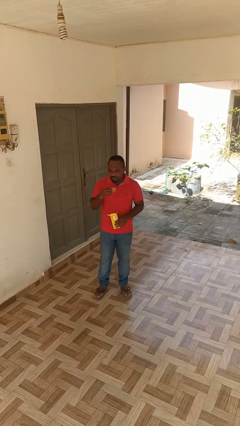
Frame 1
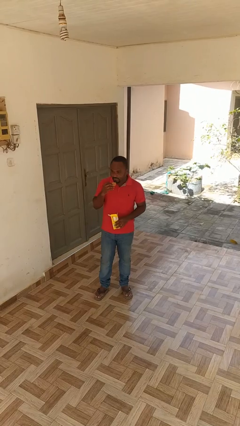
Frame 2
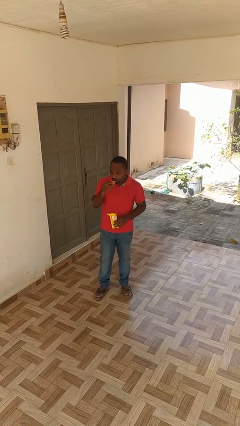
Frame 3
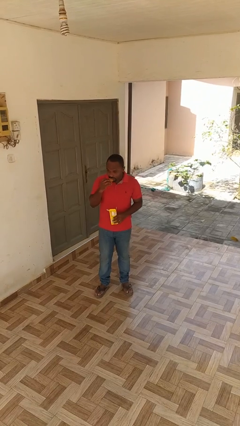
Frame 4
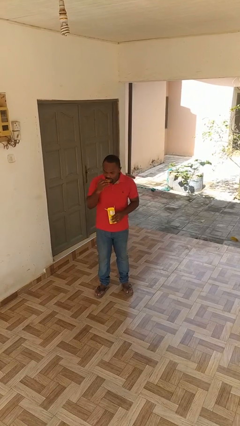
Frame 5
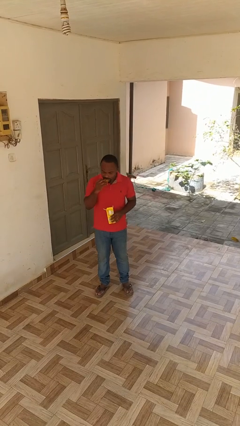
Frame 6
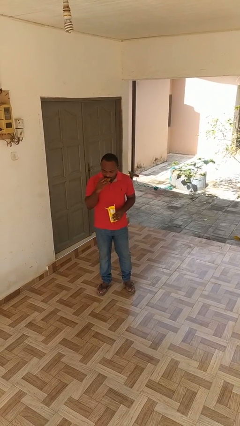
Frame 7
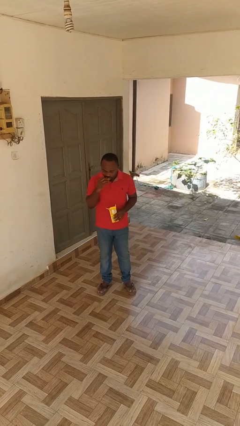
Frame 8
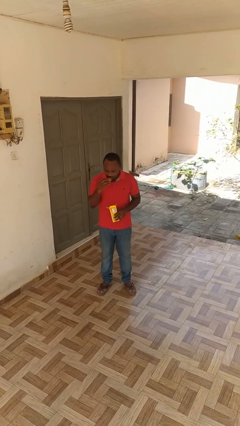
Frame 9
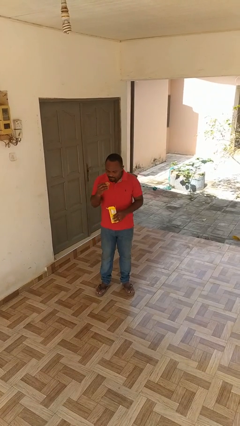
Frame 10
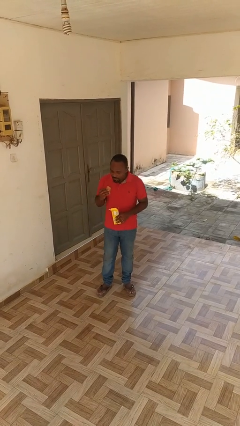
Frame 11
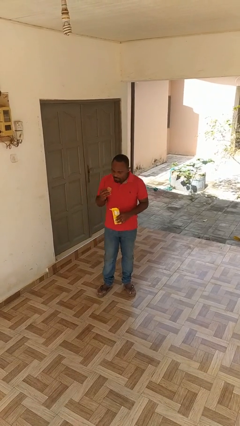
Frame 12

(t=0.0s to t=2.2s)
person eats snack from bag

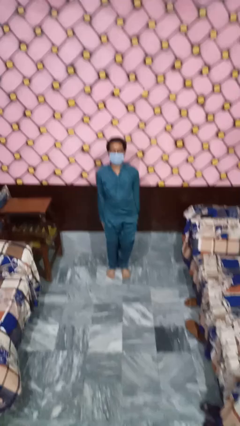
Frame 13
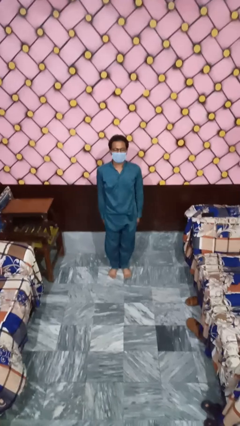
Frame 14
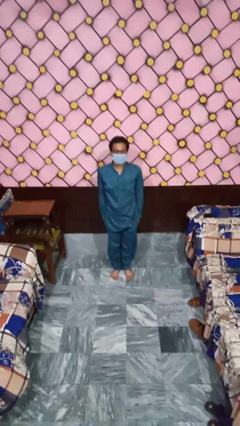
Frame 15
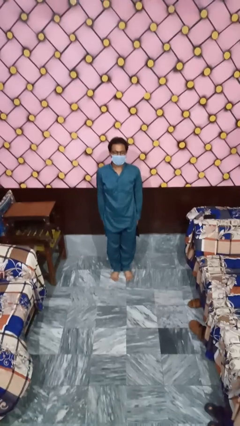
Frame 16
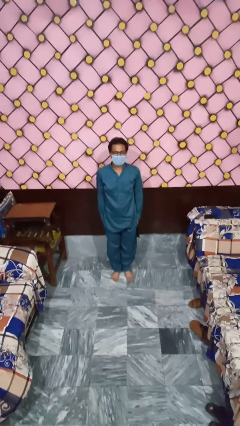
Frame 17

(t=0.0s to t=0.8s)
person exercises with jumping jacks

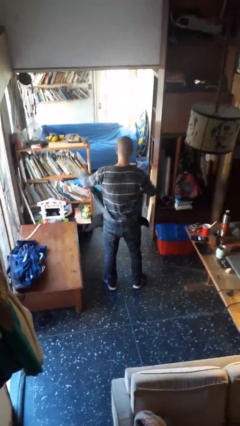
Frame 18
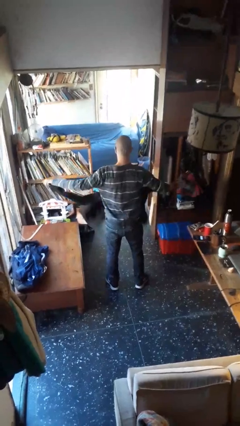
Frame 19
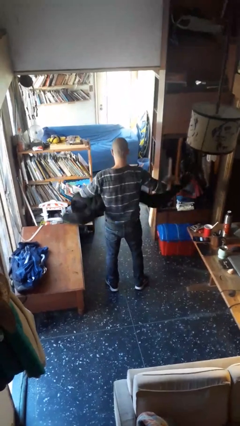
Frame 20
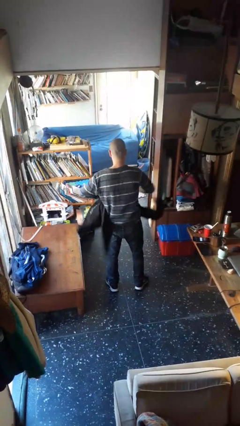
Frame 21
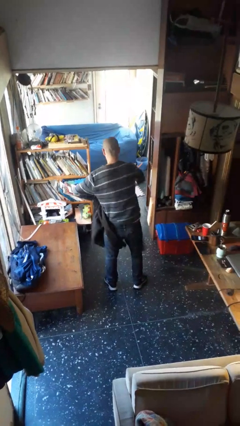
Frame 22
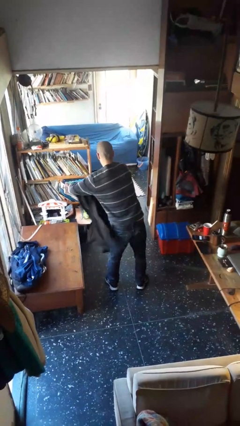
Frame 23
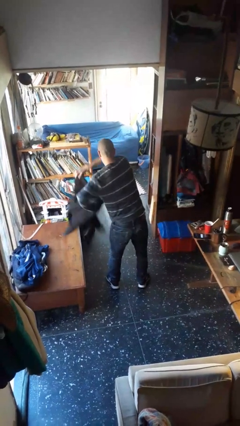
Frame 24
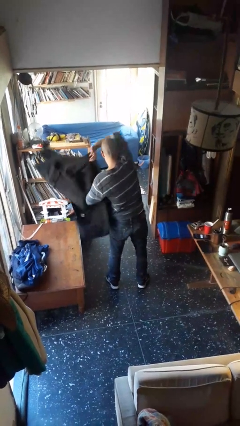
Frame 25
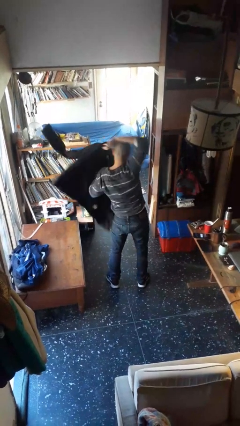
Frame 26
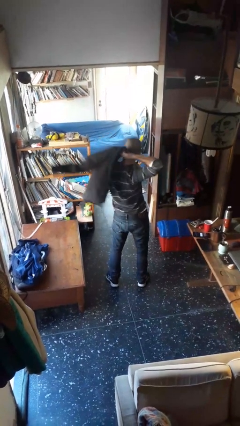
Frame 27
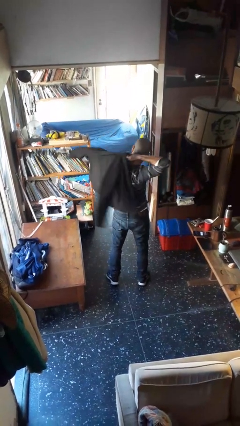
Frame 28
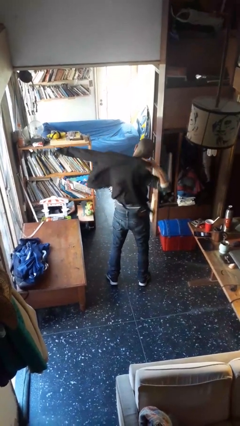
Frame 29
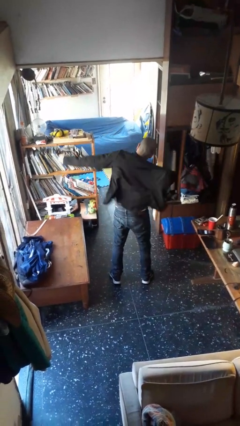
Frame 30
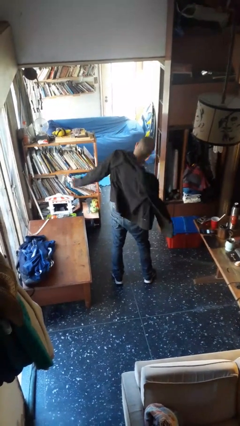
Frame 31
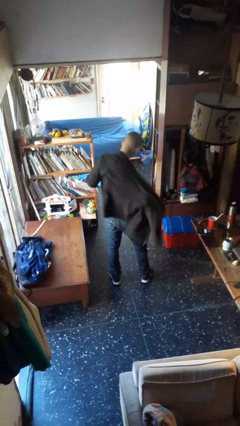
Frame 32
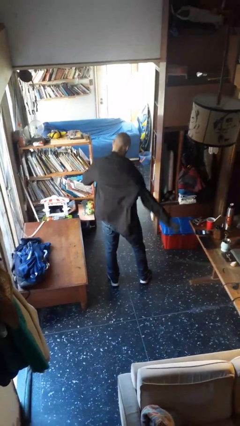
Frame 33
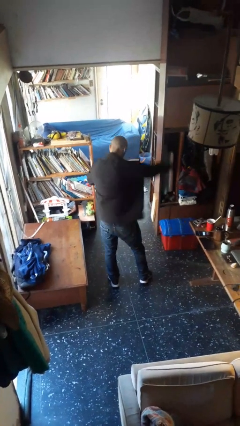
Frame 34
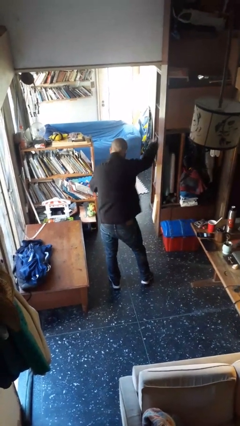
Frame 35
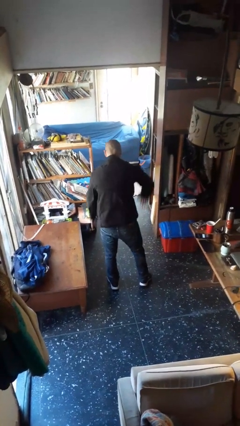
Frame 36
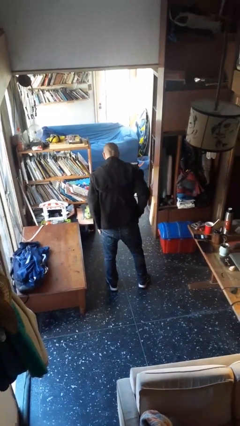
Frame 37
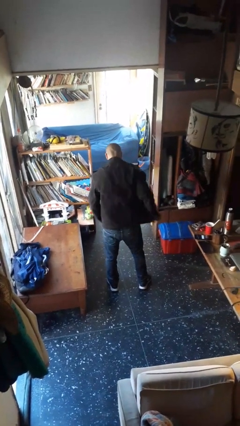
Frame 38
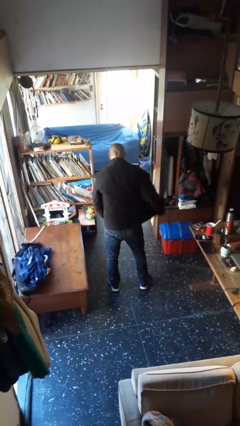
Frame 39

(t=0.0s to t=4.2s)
person puts on jacket

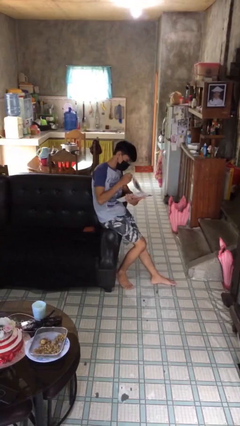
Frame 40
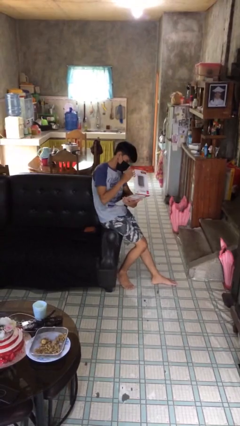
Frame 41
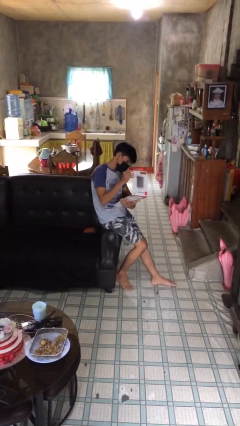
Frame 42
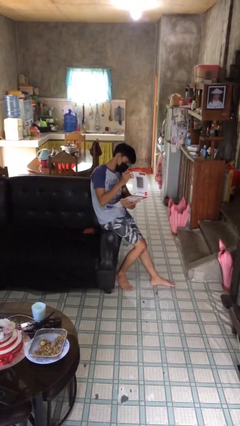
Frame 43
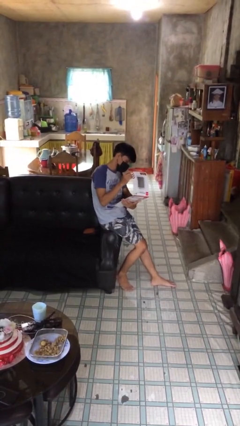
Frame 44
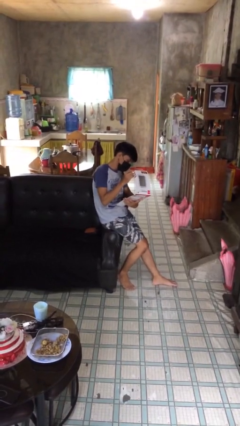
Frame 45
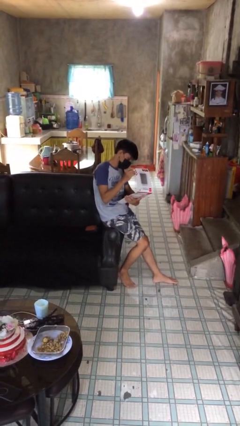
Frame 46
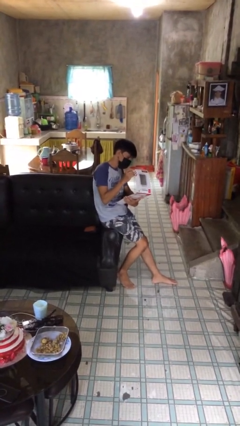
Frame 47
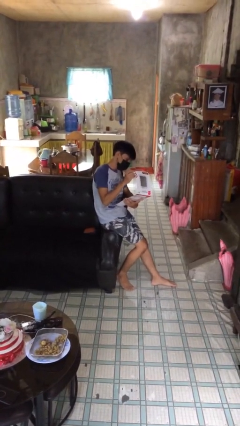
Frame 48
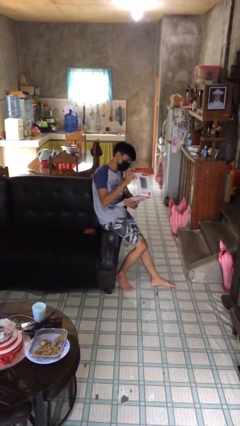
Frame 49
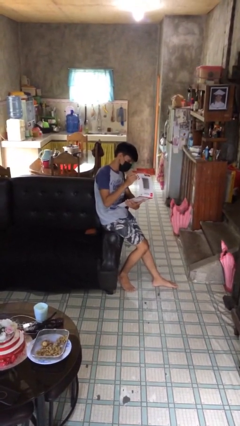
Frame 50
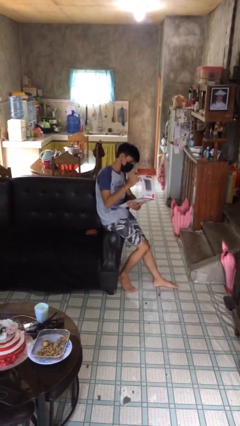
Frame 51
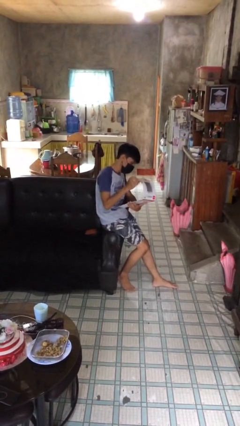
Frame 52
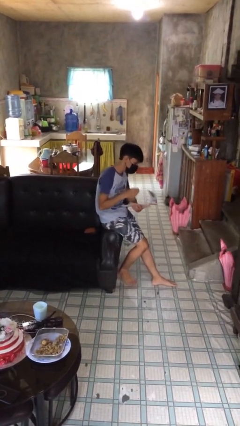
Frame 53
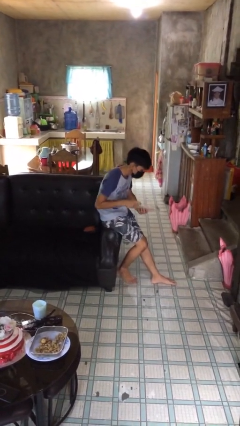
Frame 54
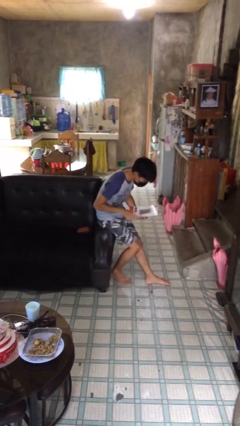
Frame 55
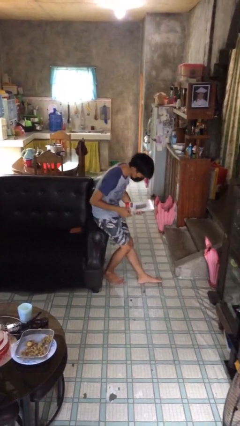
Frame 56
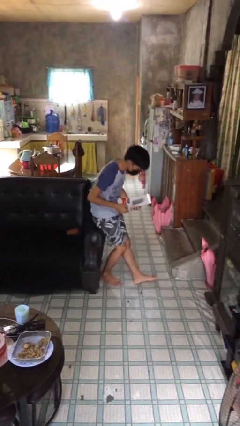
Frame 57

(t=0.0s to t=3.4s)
person reads document

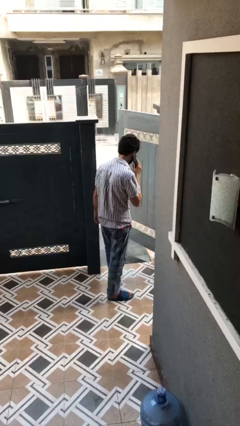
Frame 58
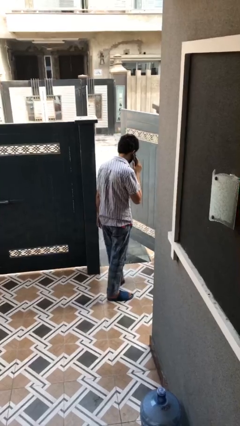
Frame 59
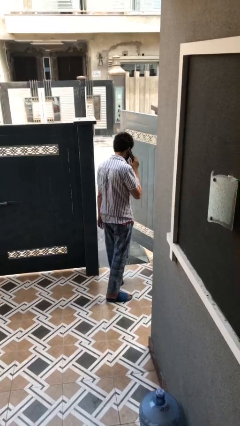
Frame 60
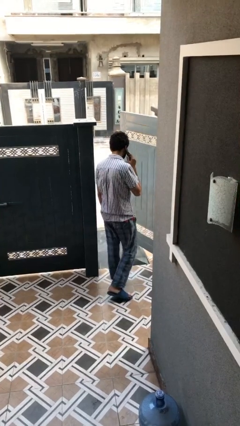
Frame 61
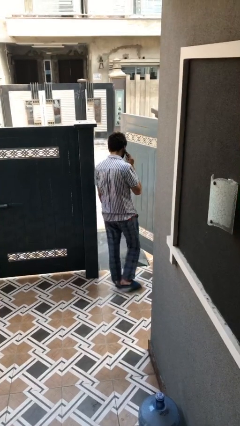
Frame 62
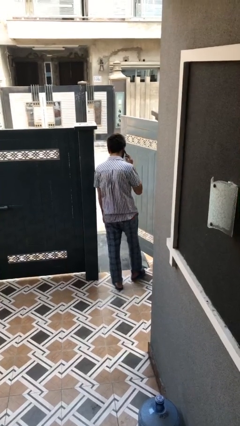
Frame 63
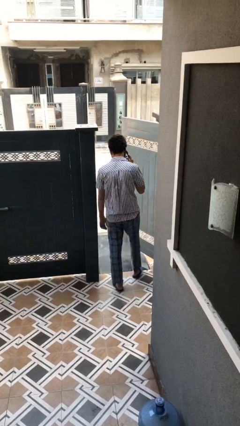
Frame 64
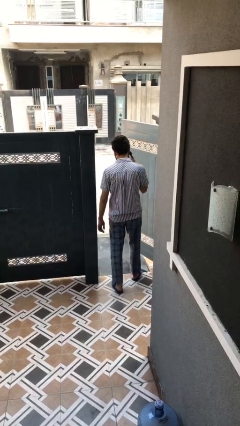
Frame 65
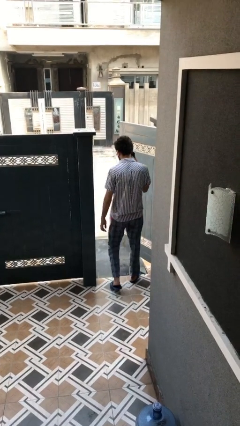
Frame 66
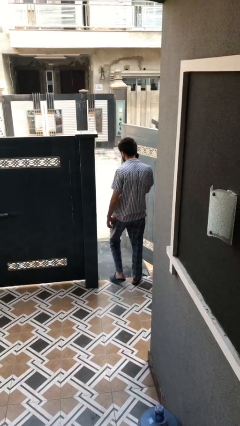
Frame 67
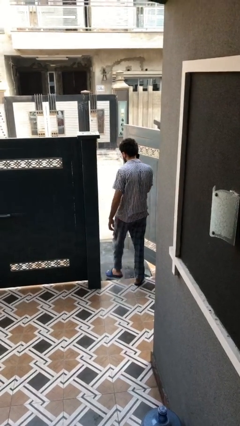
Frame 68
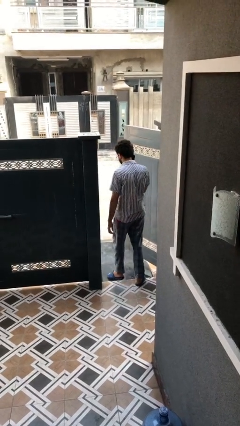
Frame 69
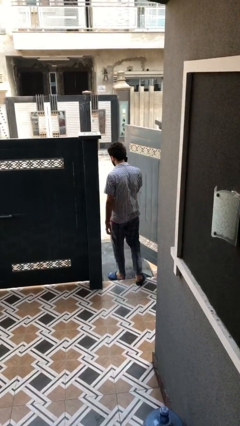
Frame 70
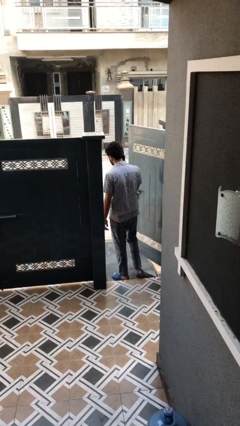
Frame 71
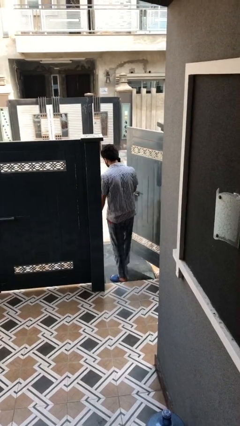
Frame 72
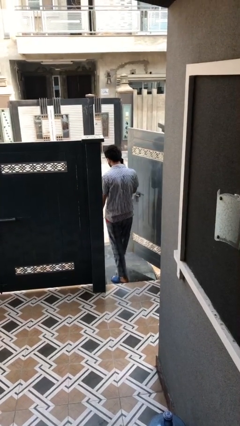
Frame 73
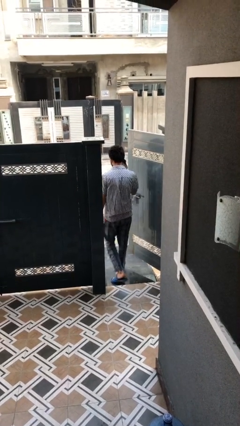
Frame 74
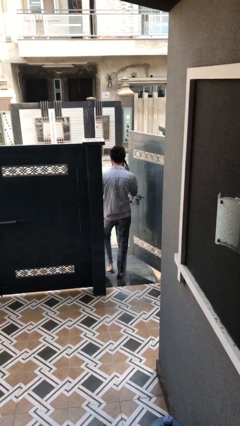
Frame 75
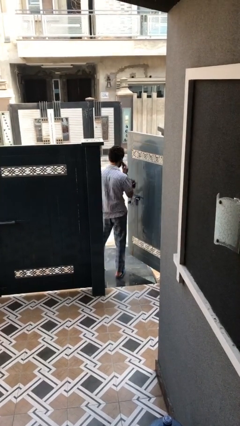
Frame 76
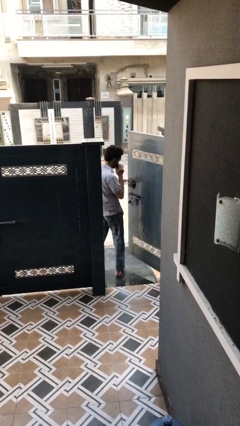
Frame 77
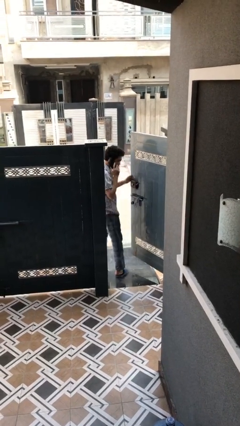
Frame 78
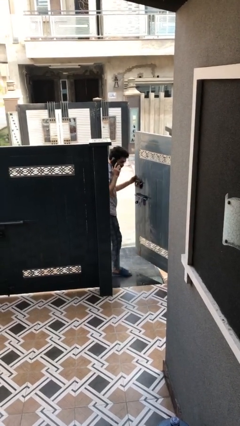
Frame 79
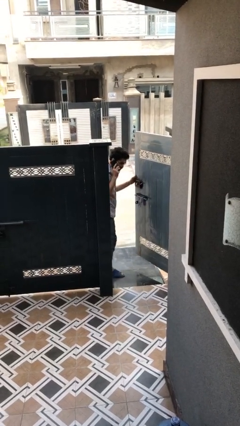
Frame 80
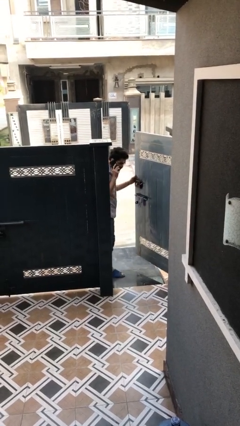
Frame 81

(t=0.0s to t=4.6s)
person exits scene through structure

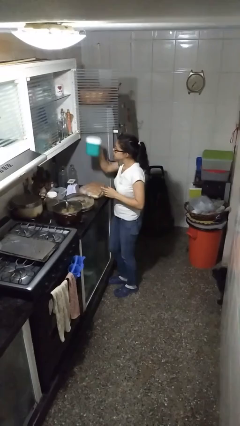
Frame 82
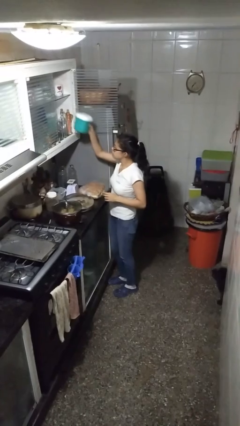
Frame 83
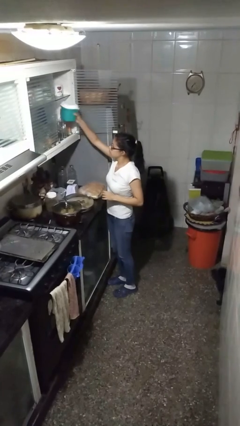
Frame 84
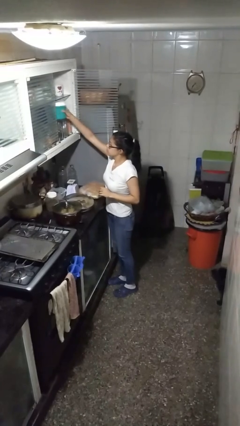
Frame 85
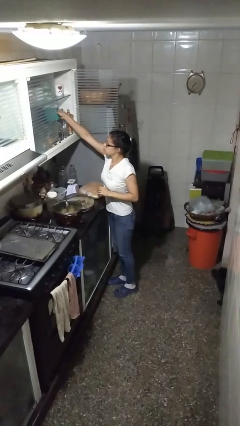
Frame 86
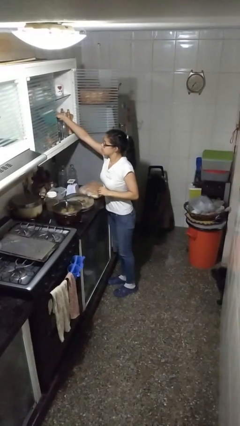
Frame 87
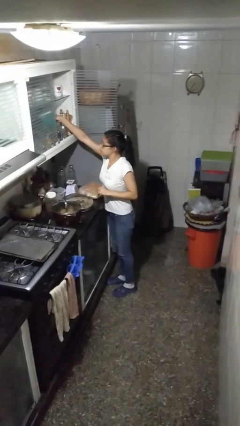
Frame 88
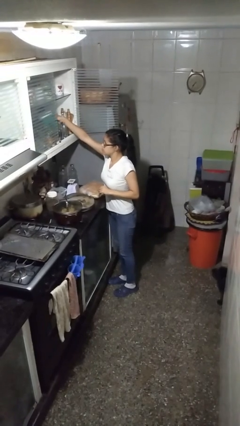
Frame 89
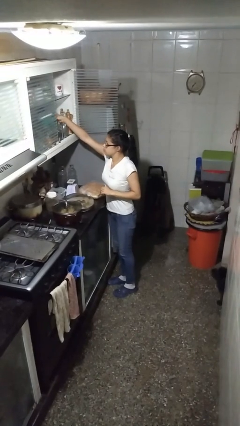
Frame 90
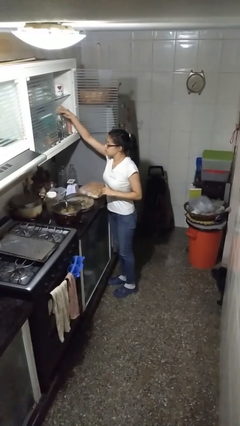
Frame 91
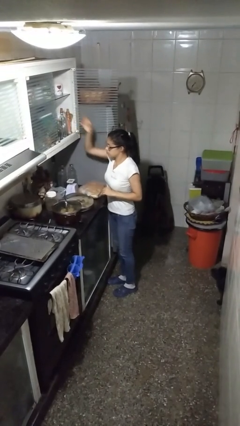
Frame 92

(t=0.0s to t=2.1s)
person puts down object into cabinet
